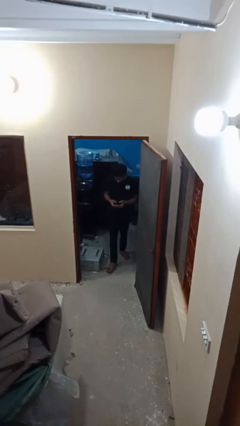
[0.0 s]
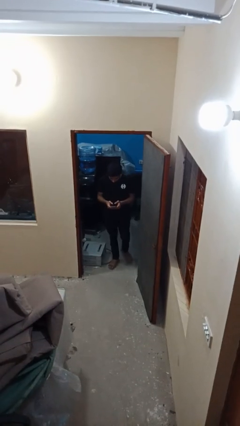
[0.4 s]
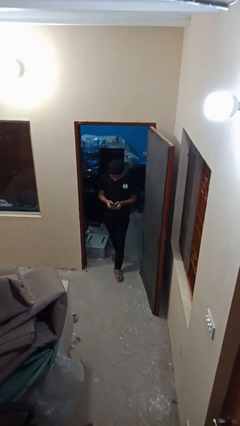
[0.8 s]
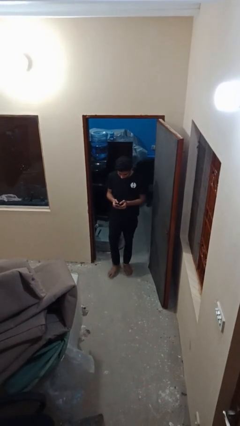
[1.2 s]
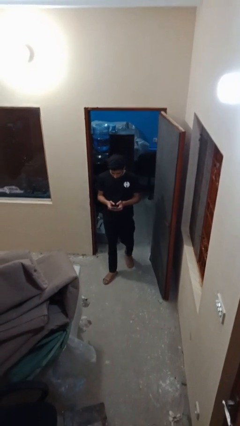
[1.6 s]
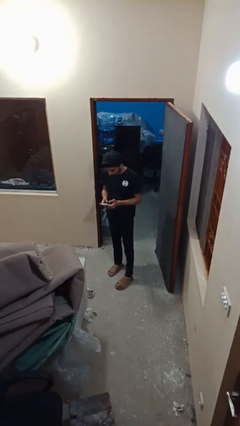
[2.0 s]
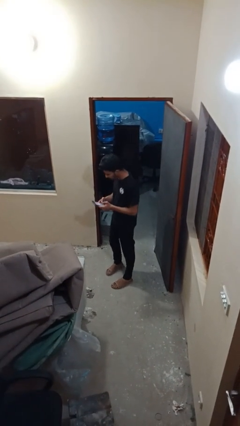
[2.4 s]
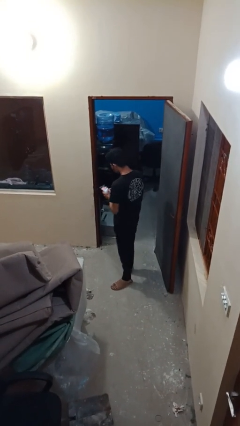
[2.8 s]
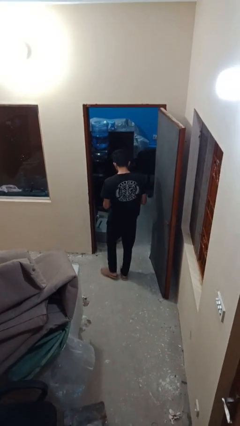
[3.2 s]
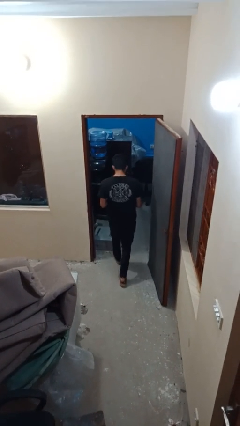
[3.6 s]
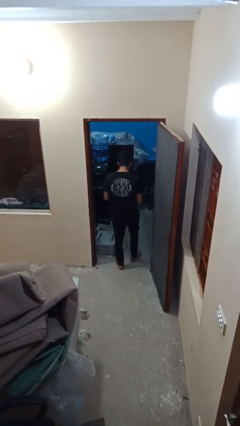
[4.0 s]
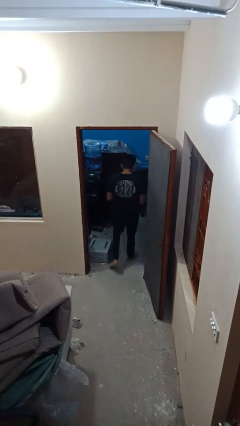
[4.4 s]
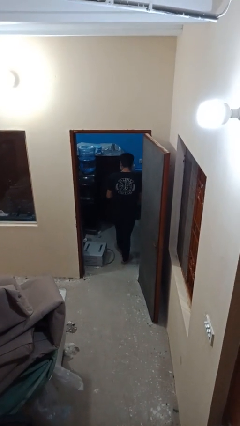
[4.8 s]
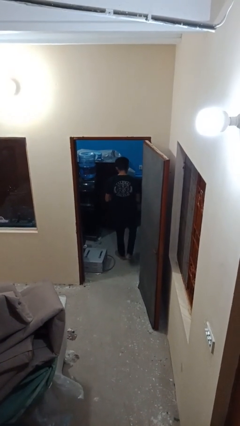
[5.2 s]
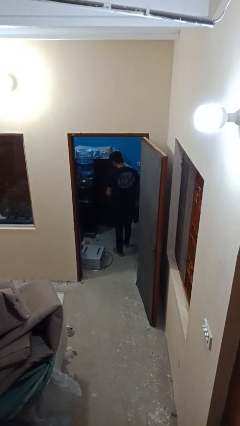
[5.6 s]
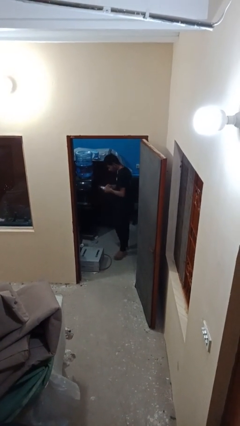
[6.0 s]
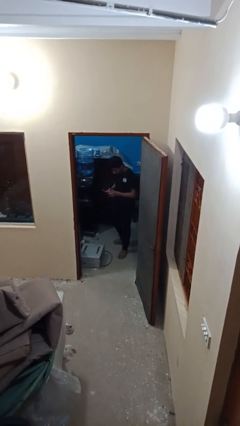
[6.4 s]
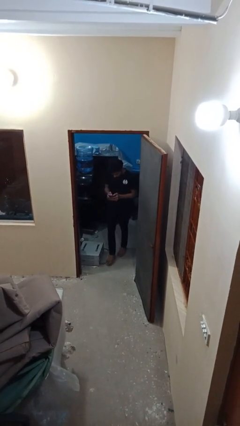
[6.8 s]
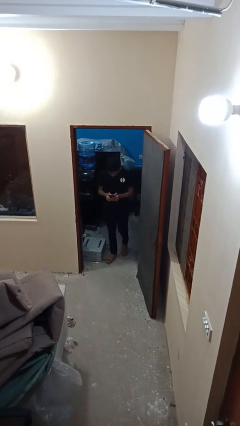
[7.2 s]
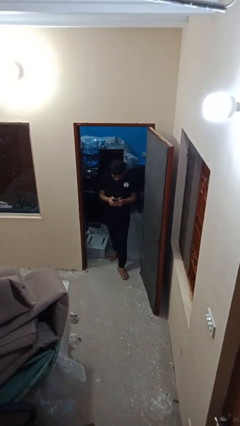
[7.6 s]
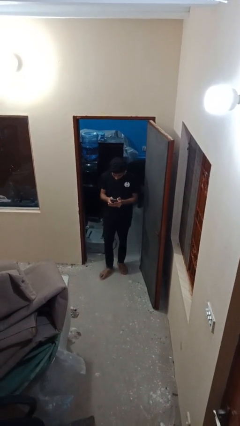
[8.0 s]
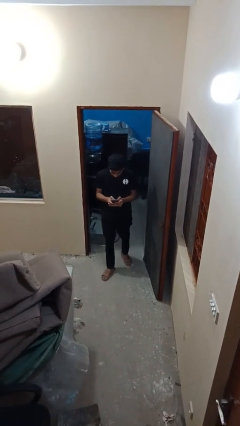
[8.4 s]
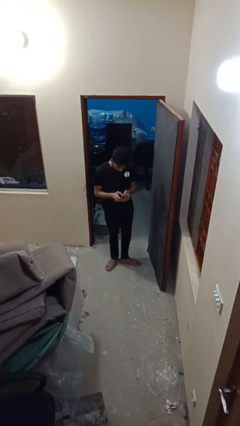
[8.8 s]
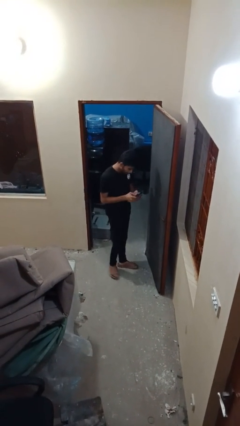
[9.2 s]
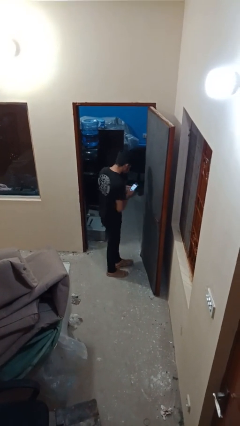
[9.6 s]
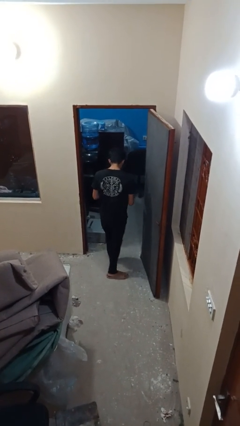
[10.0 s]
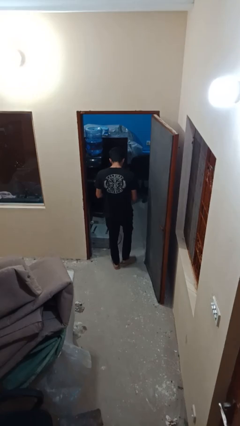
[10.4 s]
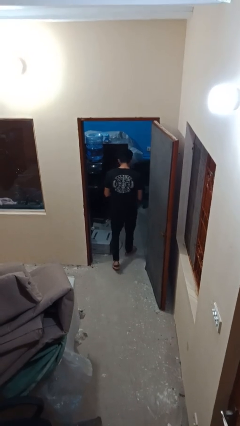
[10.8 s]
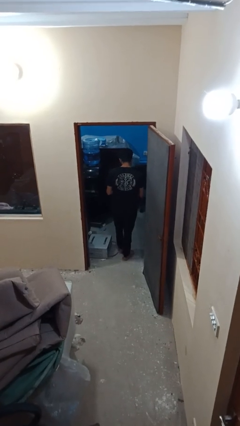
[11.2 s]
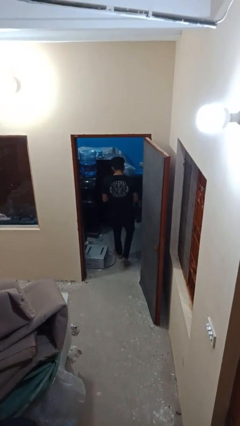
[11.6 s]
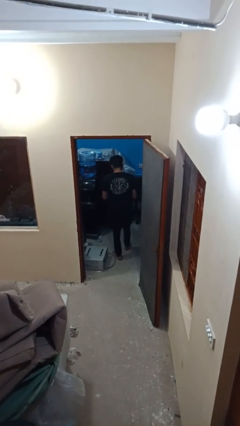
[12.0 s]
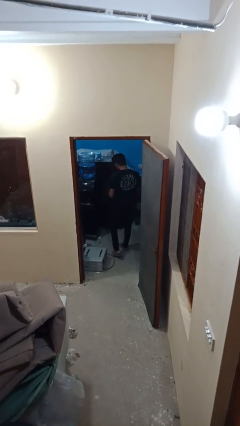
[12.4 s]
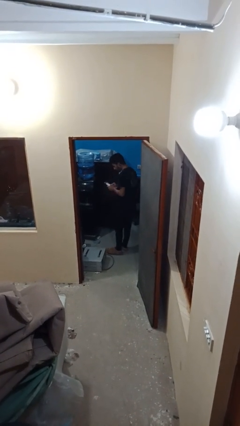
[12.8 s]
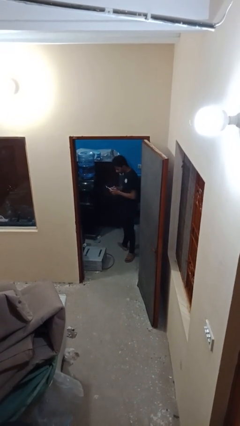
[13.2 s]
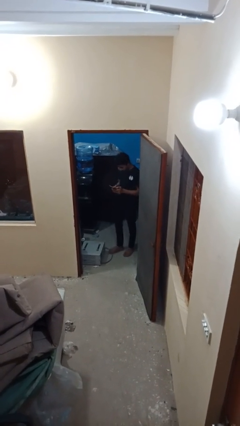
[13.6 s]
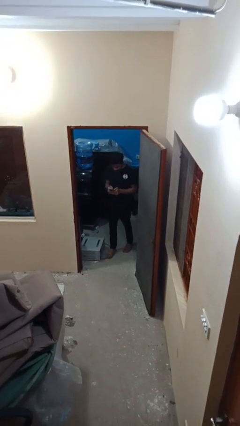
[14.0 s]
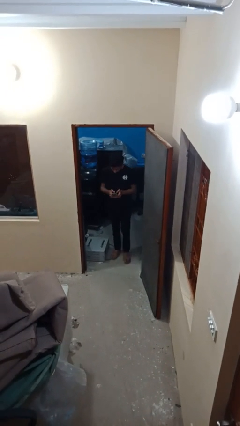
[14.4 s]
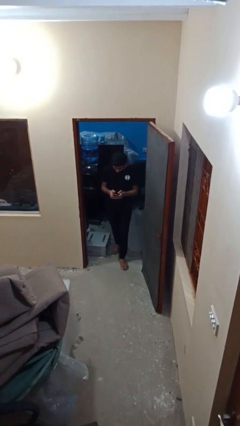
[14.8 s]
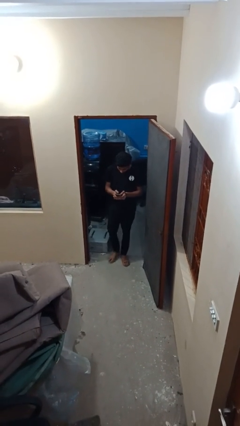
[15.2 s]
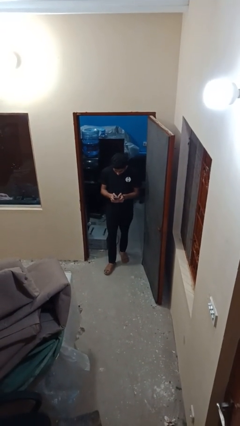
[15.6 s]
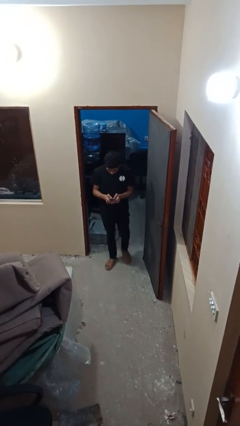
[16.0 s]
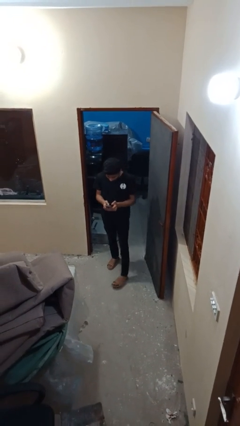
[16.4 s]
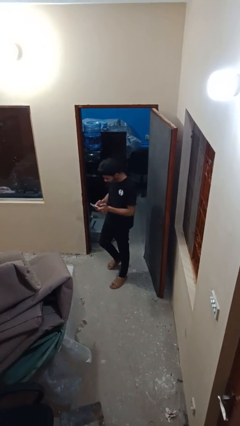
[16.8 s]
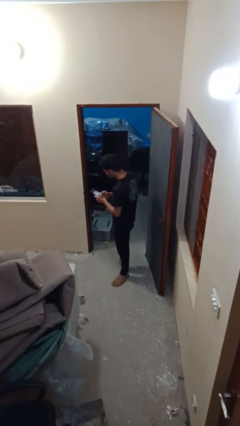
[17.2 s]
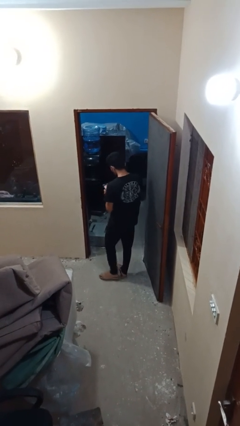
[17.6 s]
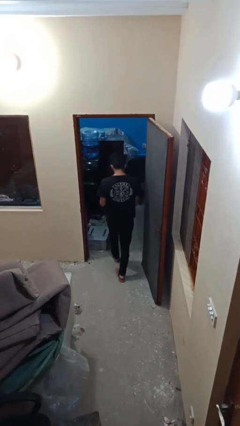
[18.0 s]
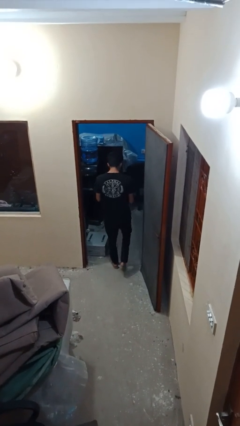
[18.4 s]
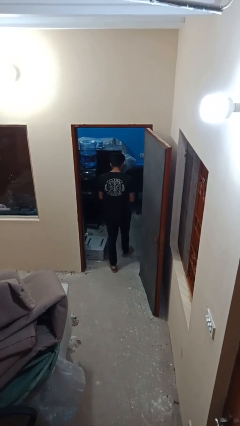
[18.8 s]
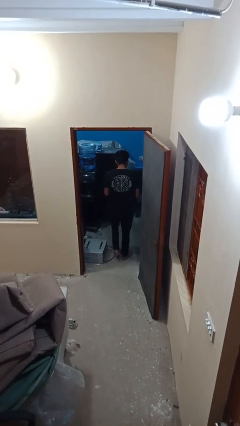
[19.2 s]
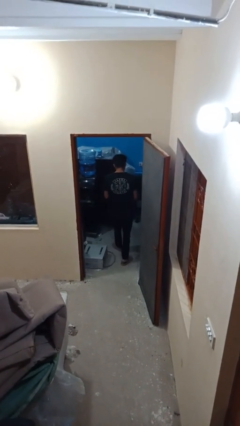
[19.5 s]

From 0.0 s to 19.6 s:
person texts on phone

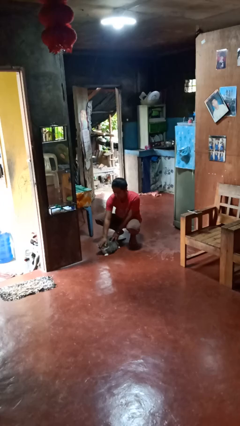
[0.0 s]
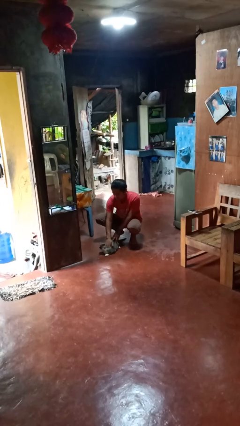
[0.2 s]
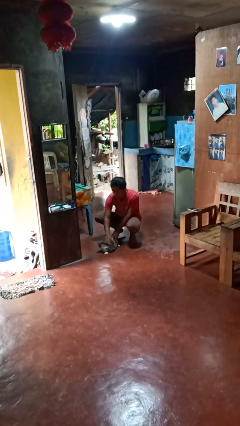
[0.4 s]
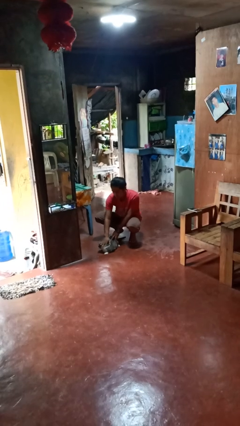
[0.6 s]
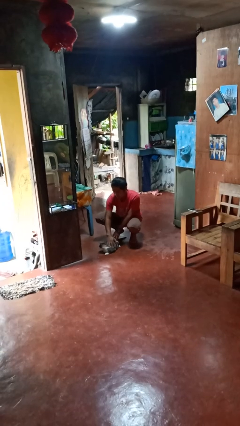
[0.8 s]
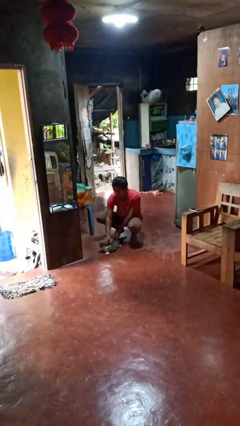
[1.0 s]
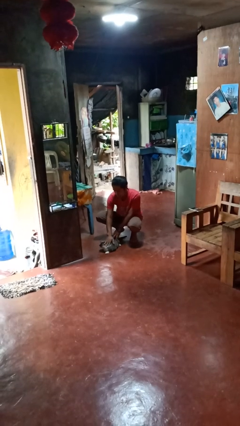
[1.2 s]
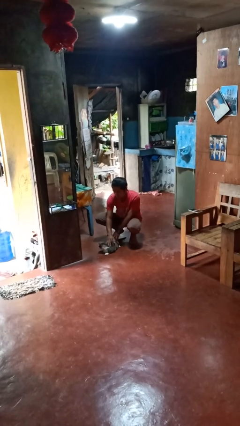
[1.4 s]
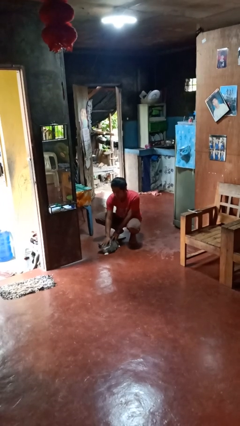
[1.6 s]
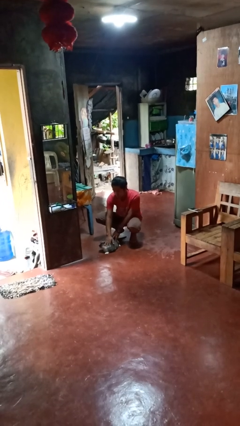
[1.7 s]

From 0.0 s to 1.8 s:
person pets cat

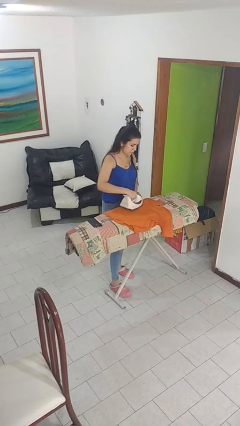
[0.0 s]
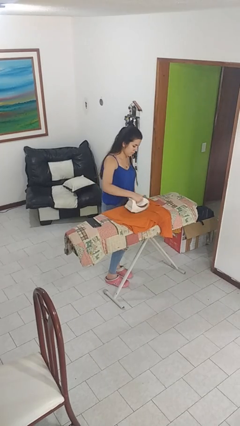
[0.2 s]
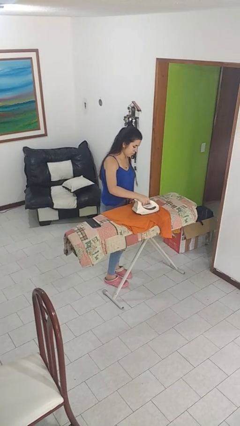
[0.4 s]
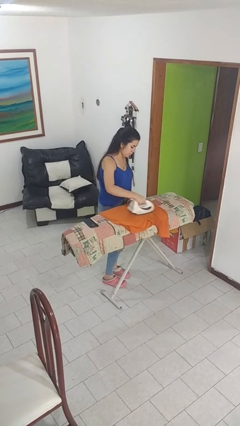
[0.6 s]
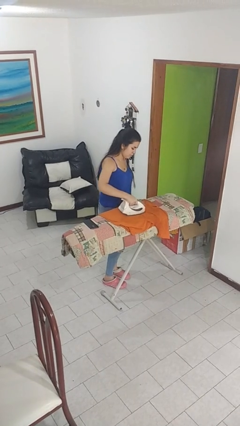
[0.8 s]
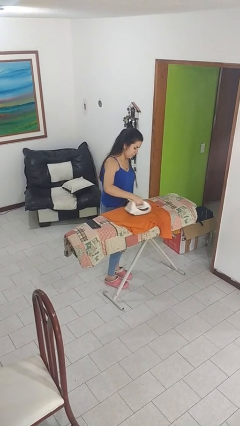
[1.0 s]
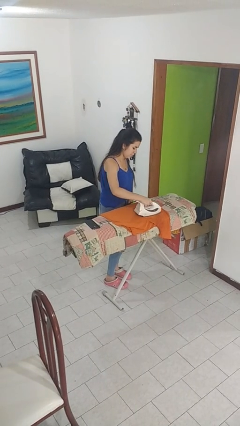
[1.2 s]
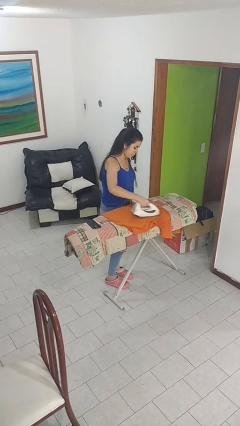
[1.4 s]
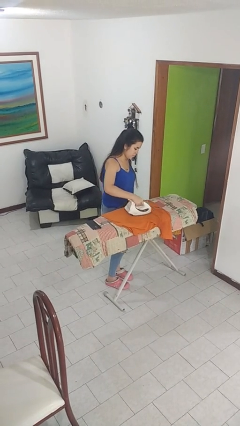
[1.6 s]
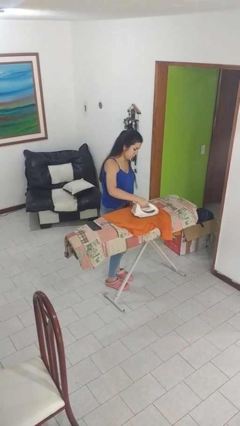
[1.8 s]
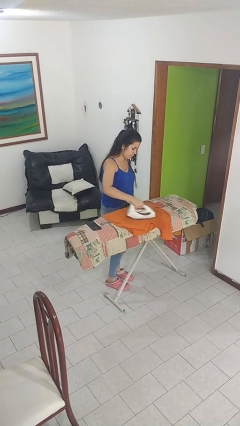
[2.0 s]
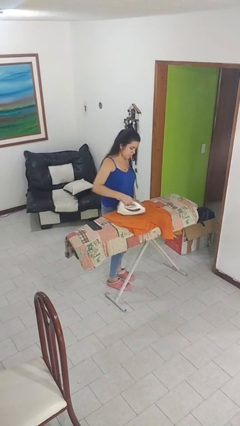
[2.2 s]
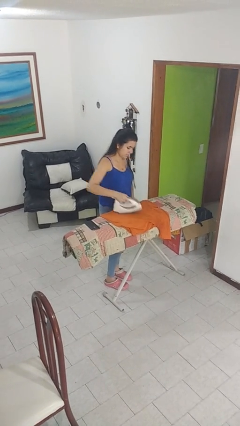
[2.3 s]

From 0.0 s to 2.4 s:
person irons clothes

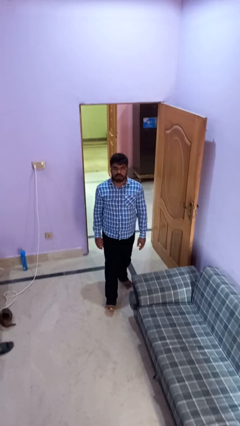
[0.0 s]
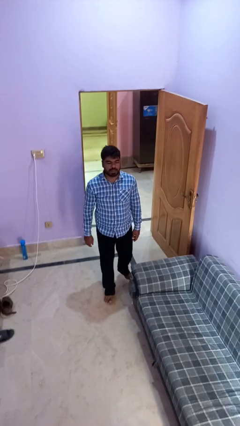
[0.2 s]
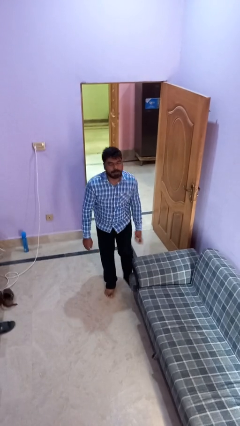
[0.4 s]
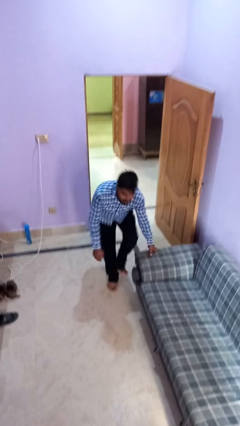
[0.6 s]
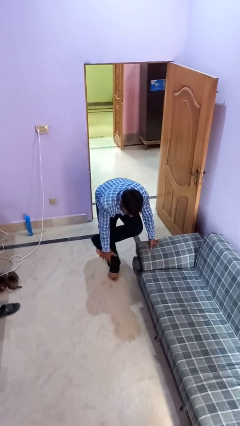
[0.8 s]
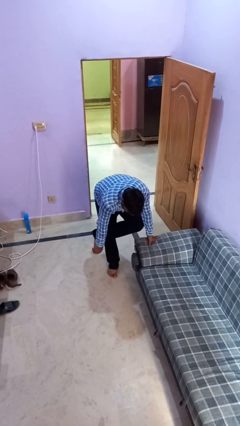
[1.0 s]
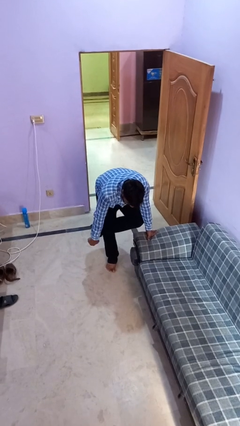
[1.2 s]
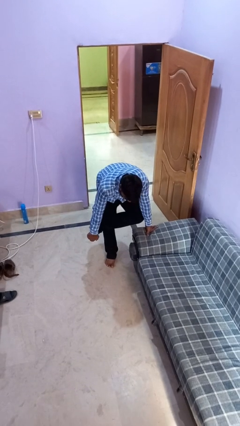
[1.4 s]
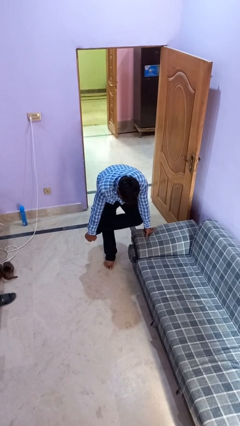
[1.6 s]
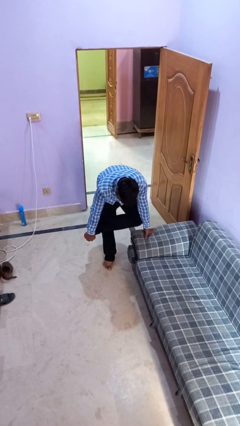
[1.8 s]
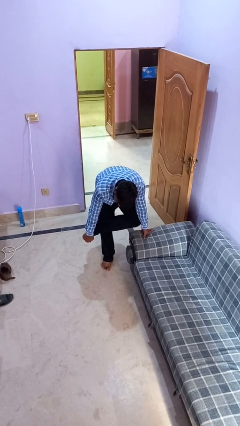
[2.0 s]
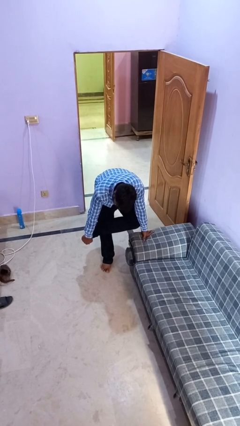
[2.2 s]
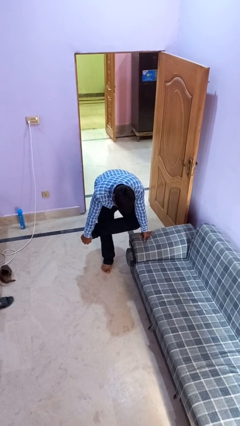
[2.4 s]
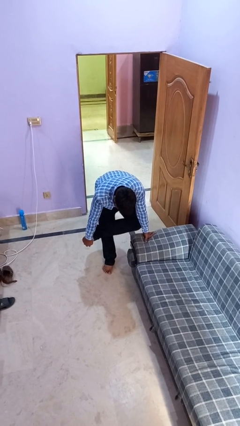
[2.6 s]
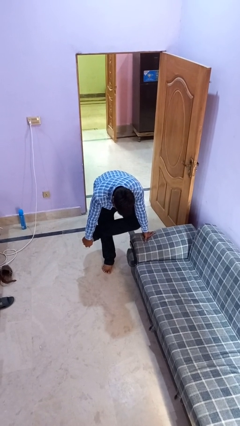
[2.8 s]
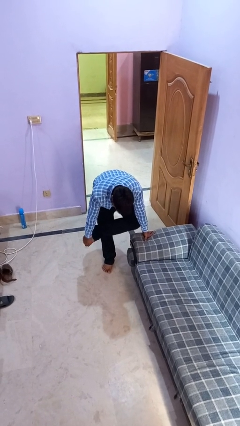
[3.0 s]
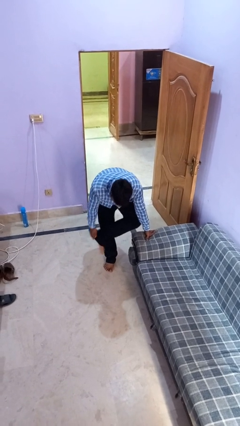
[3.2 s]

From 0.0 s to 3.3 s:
person stubs toe

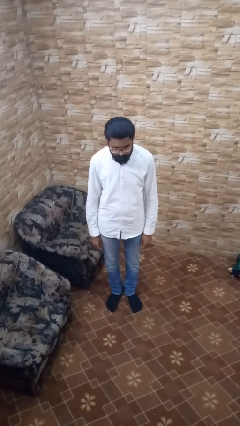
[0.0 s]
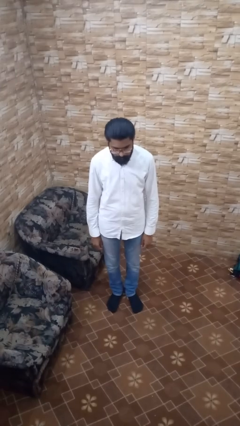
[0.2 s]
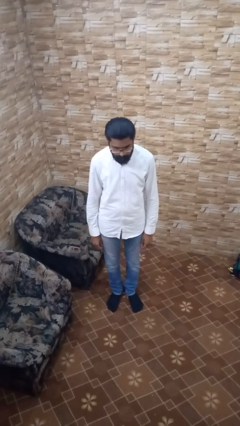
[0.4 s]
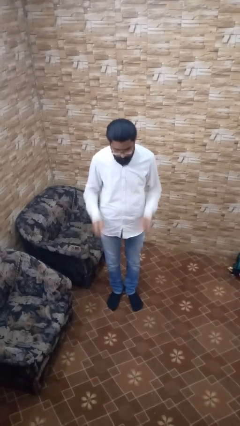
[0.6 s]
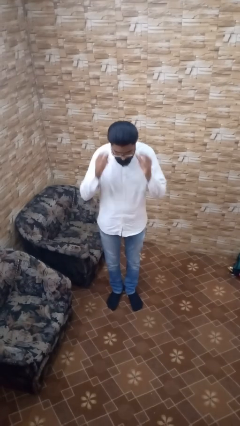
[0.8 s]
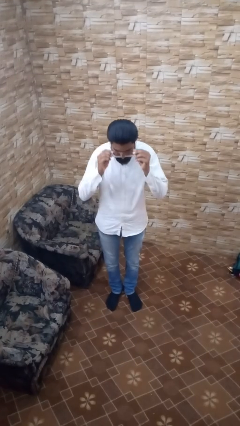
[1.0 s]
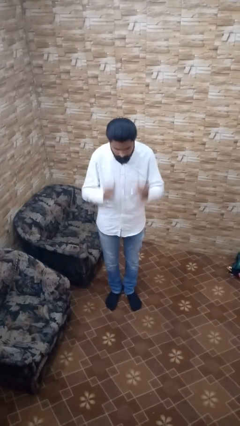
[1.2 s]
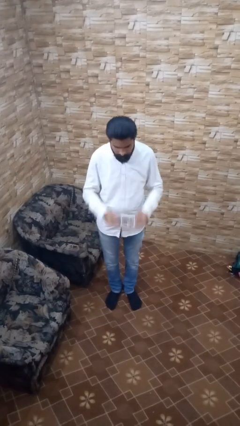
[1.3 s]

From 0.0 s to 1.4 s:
person takes off glasses
